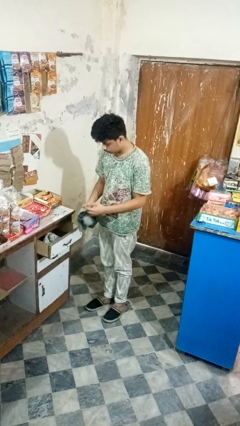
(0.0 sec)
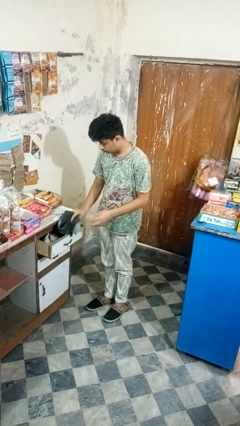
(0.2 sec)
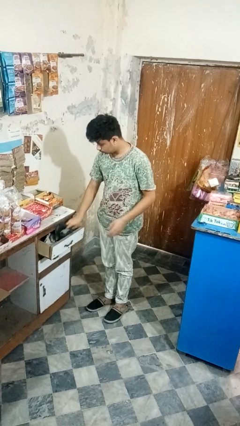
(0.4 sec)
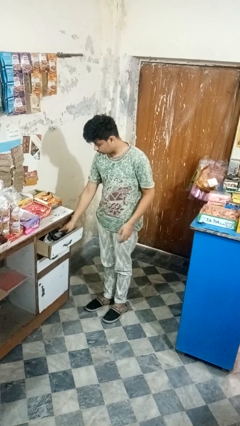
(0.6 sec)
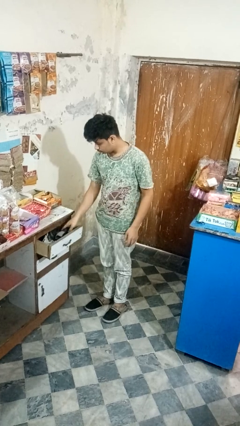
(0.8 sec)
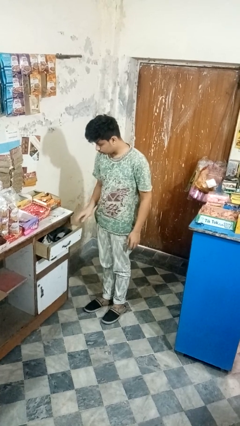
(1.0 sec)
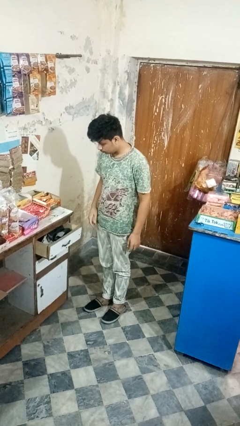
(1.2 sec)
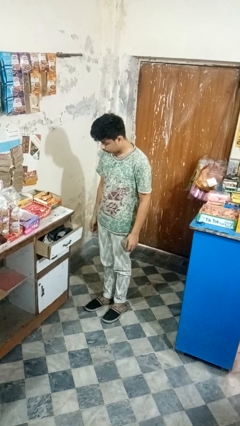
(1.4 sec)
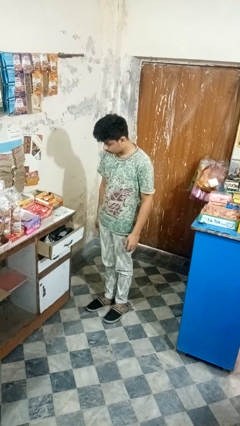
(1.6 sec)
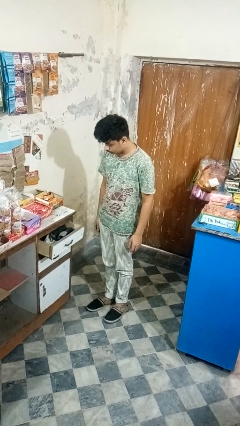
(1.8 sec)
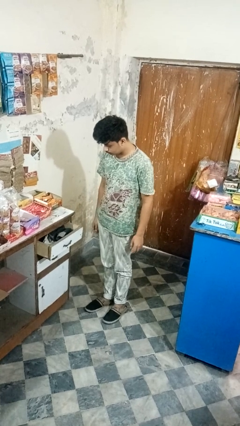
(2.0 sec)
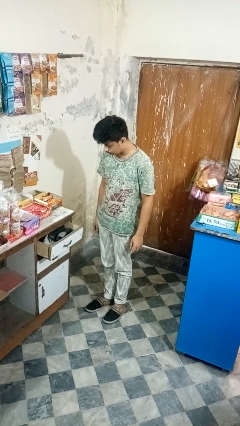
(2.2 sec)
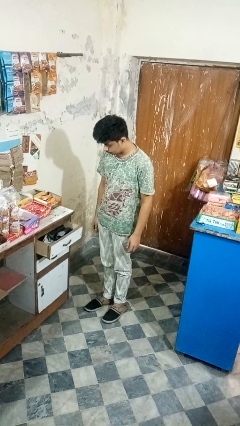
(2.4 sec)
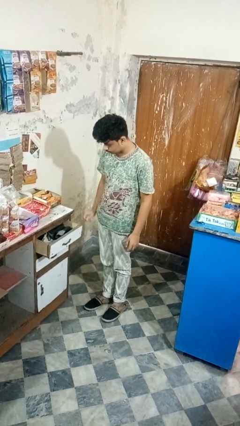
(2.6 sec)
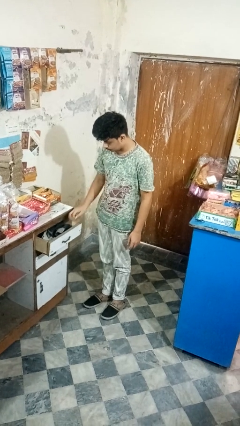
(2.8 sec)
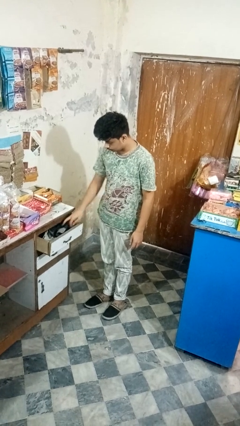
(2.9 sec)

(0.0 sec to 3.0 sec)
person puts clothes into dresser

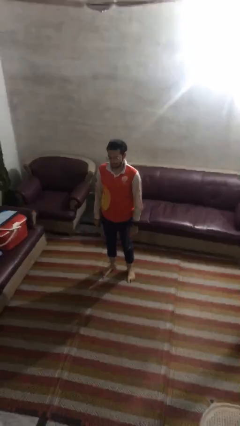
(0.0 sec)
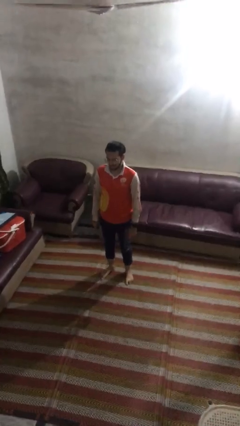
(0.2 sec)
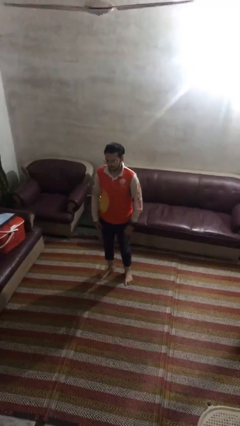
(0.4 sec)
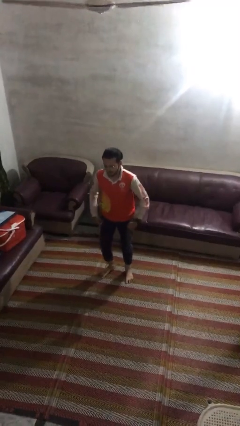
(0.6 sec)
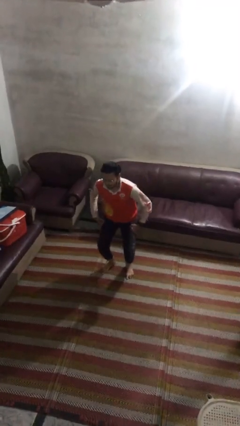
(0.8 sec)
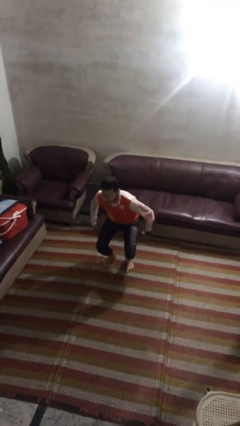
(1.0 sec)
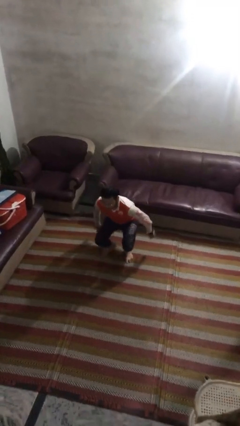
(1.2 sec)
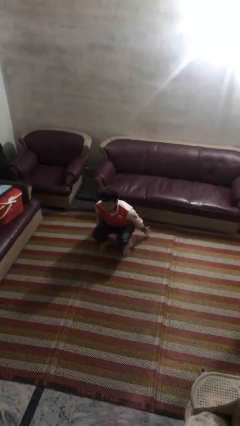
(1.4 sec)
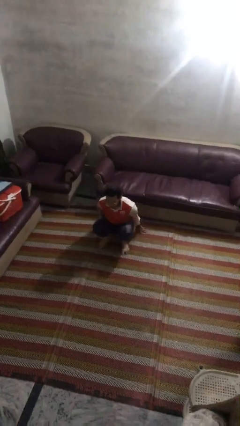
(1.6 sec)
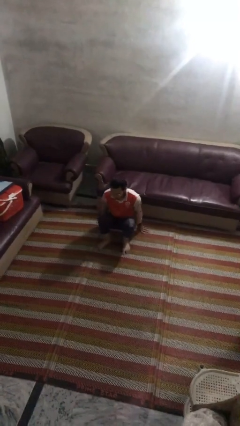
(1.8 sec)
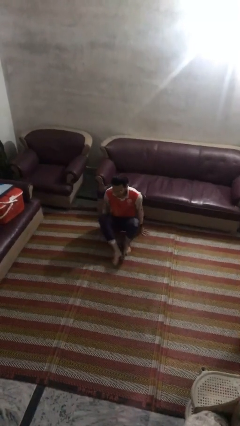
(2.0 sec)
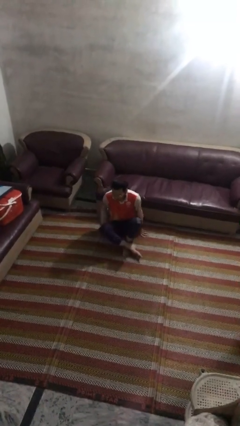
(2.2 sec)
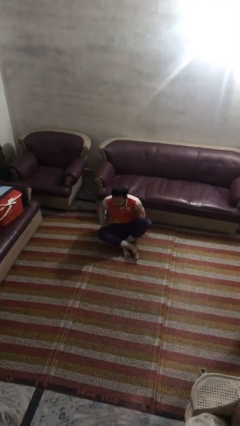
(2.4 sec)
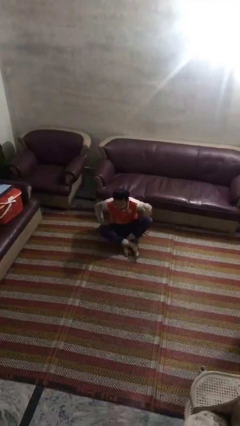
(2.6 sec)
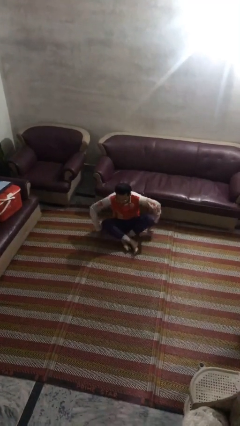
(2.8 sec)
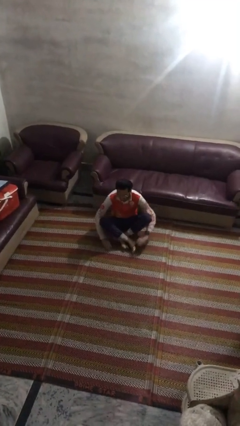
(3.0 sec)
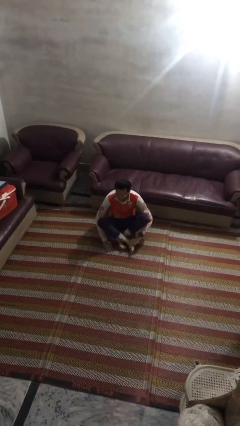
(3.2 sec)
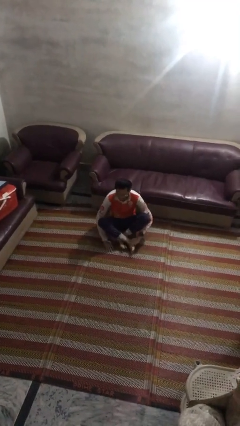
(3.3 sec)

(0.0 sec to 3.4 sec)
person sits crisscross

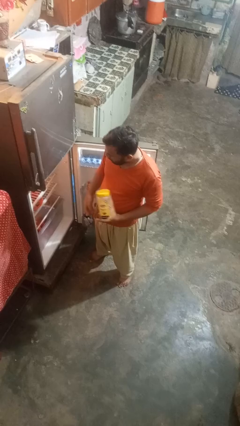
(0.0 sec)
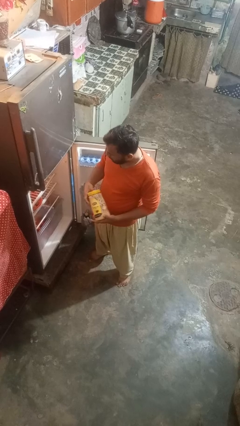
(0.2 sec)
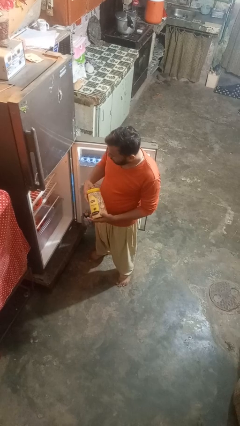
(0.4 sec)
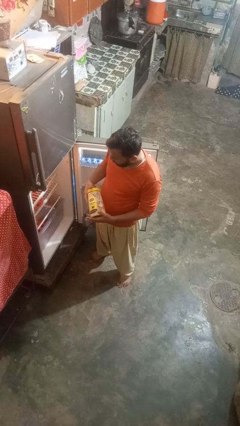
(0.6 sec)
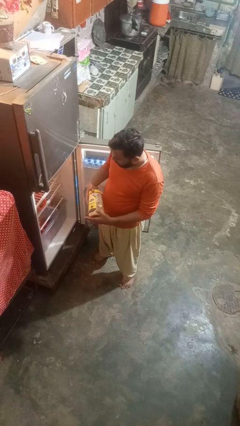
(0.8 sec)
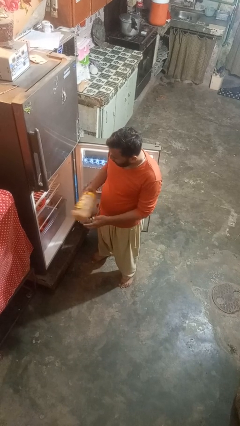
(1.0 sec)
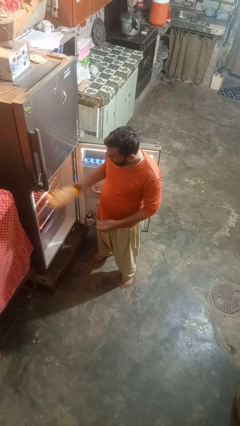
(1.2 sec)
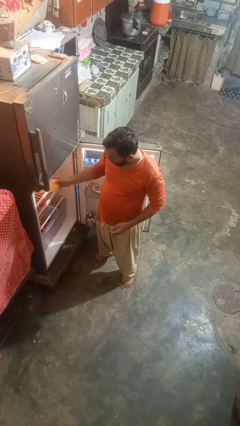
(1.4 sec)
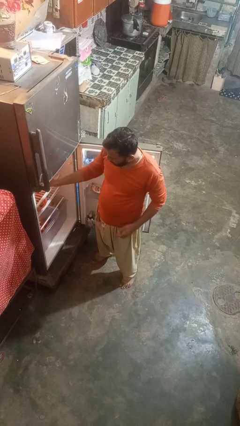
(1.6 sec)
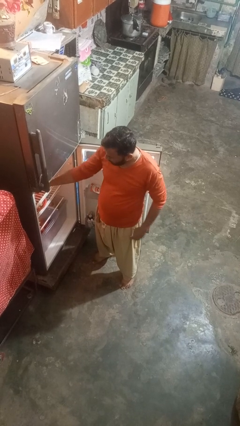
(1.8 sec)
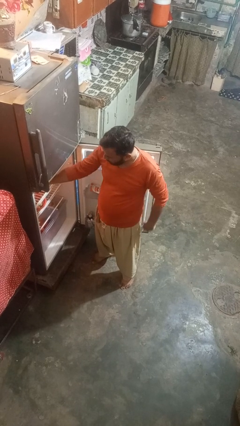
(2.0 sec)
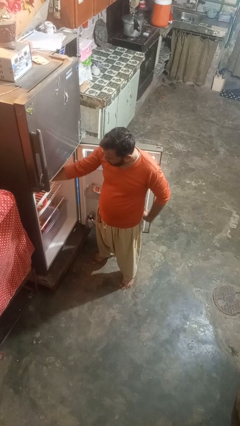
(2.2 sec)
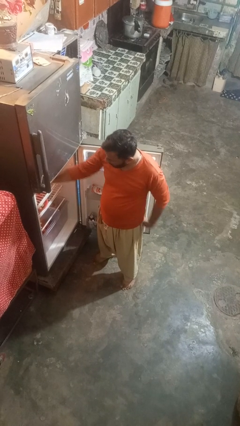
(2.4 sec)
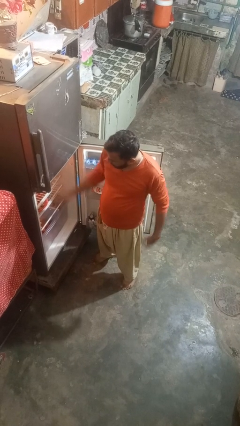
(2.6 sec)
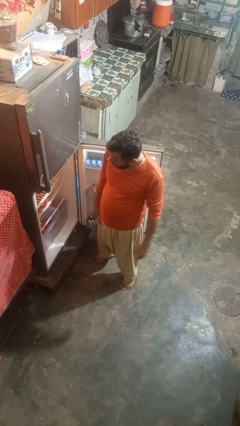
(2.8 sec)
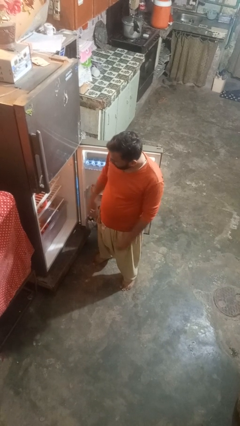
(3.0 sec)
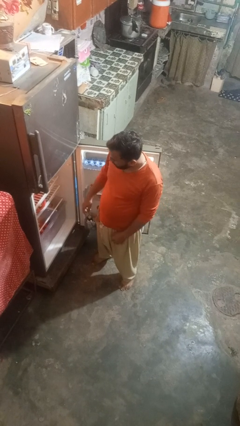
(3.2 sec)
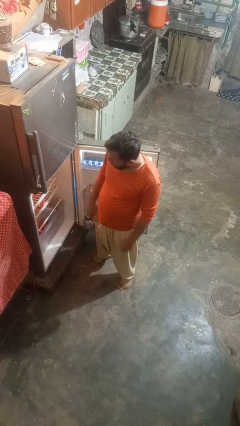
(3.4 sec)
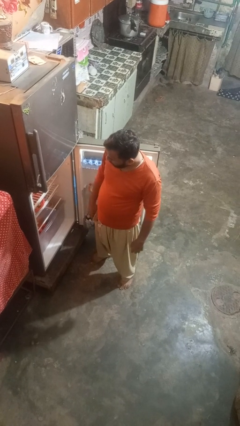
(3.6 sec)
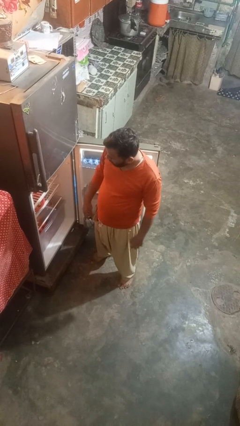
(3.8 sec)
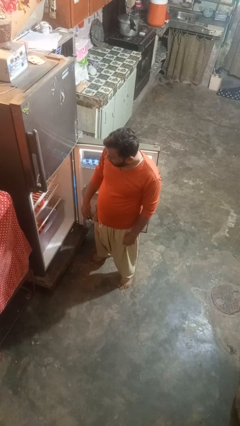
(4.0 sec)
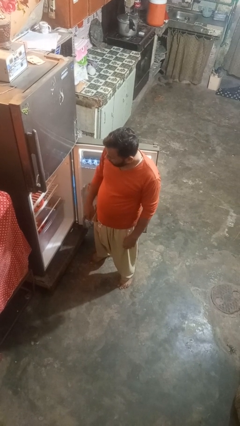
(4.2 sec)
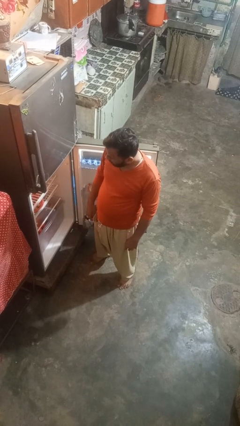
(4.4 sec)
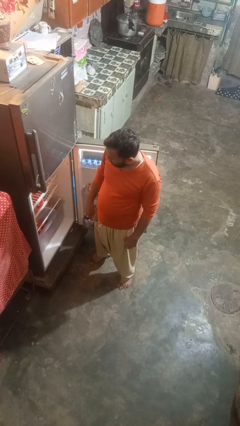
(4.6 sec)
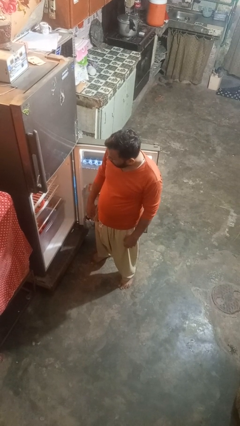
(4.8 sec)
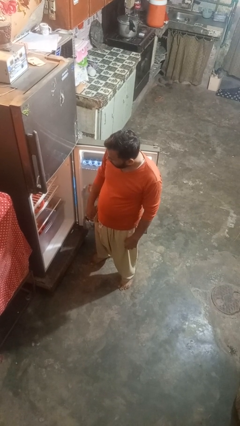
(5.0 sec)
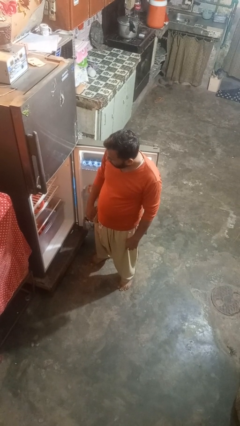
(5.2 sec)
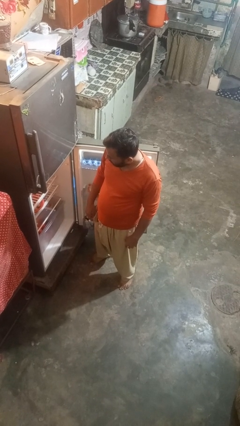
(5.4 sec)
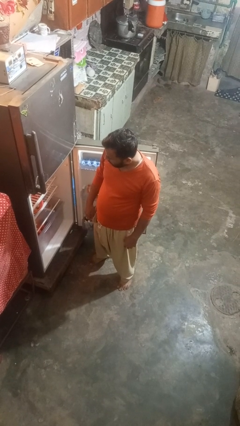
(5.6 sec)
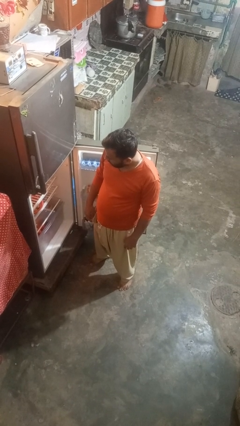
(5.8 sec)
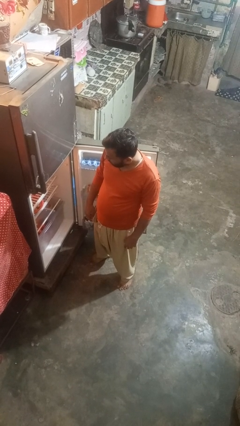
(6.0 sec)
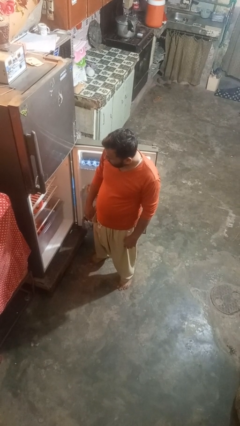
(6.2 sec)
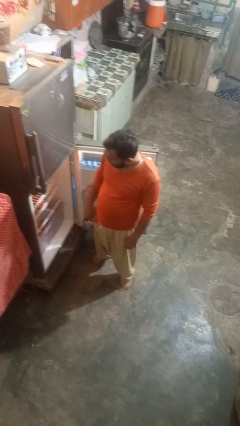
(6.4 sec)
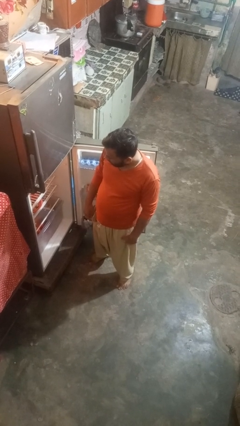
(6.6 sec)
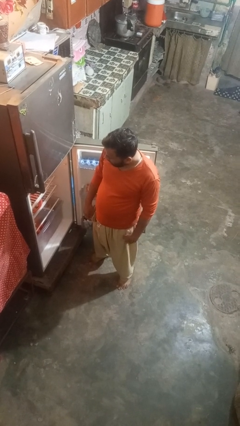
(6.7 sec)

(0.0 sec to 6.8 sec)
person puts object into refrigerator

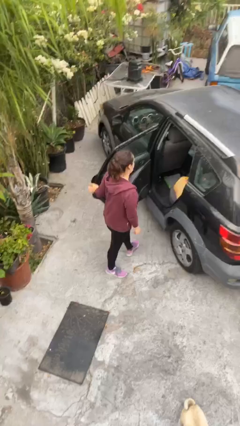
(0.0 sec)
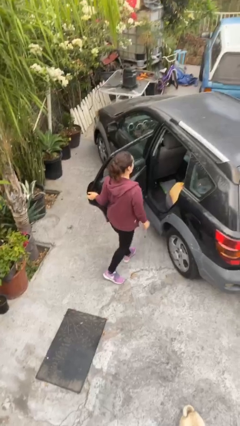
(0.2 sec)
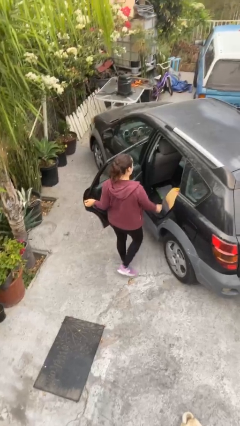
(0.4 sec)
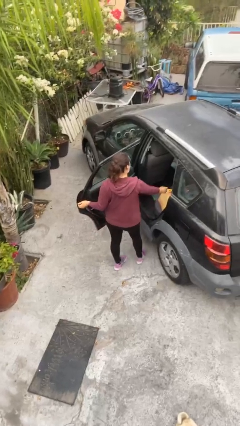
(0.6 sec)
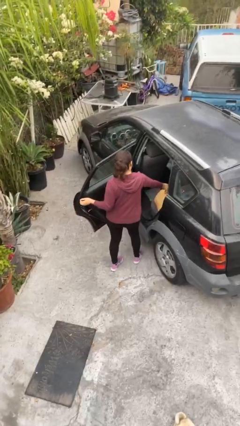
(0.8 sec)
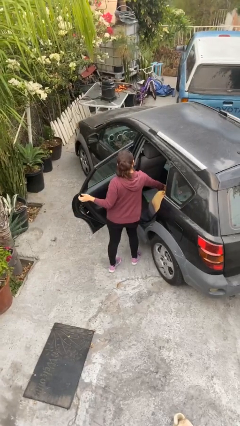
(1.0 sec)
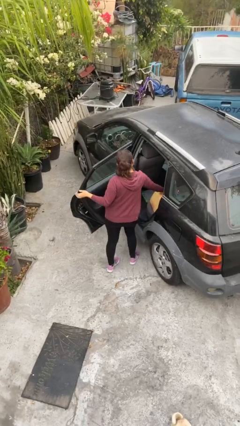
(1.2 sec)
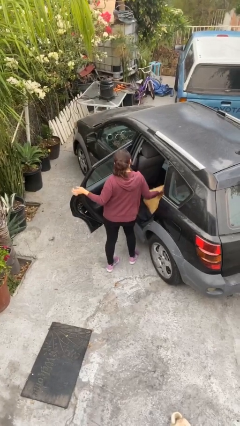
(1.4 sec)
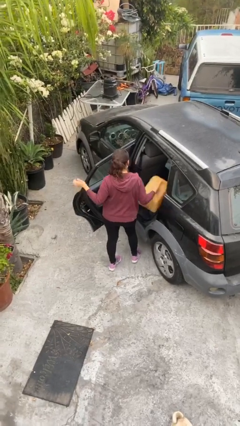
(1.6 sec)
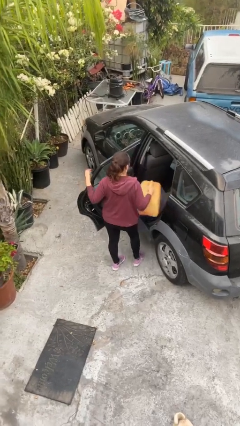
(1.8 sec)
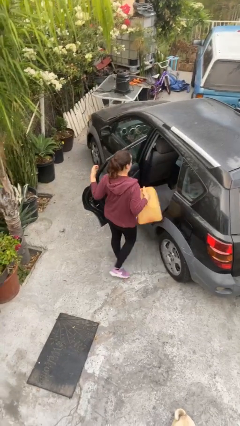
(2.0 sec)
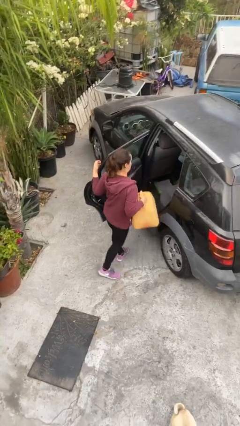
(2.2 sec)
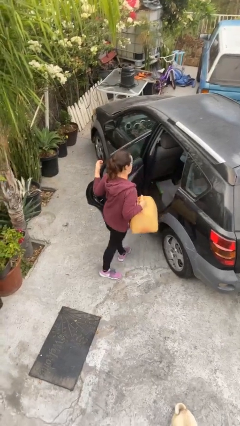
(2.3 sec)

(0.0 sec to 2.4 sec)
person unloads car

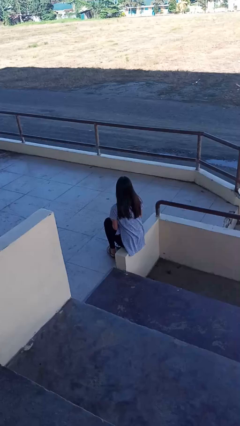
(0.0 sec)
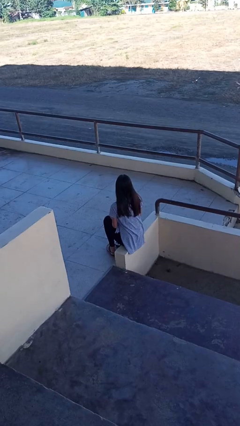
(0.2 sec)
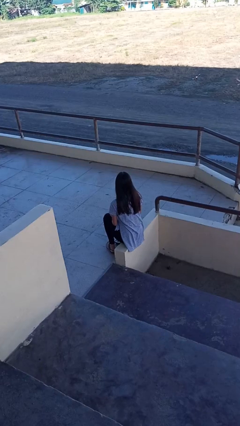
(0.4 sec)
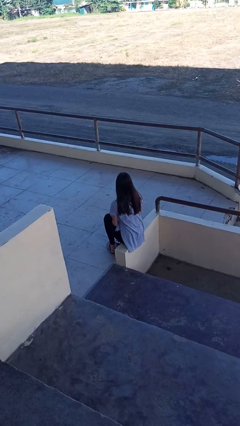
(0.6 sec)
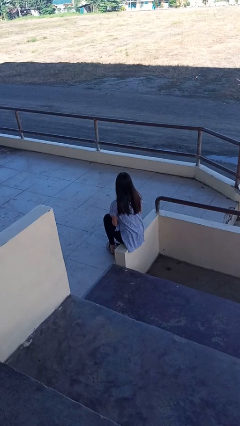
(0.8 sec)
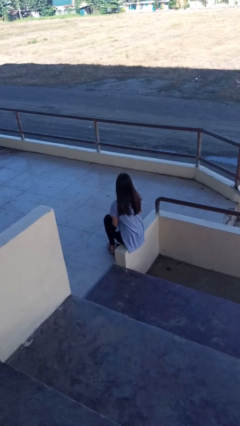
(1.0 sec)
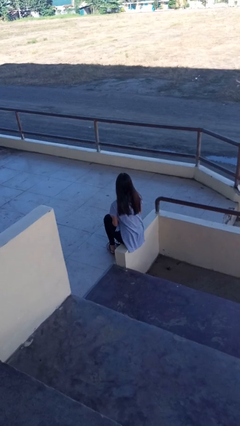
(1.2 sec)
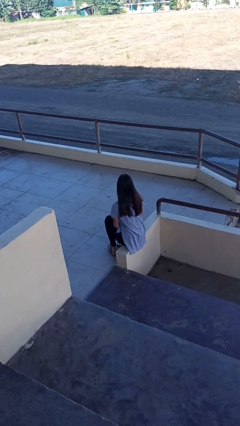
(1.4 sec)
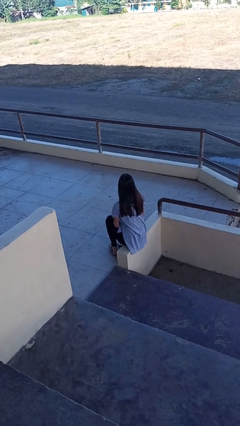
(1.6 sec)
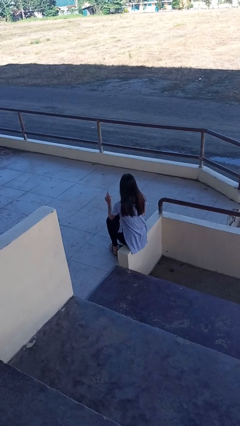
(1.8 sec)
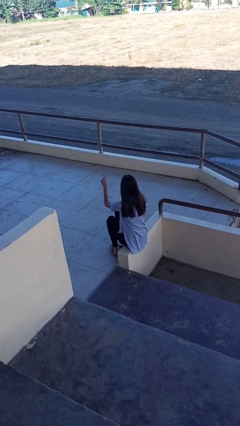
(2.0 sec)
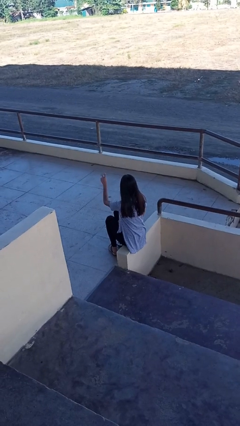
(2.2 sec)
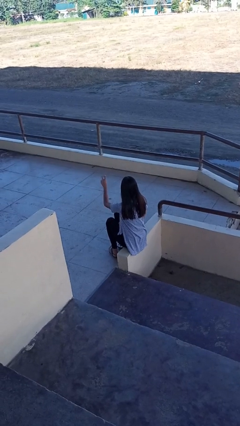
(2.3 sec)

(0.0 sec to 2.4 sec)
person gestures number one
